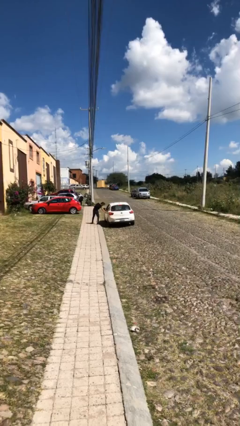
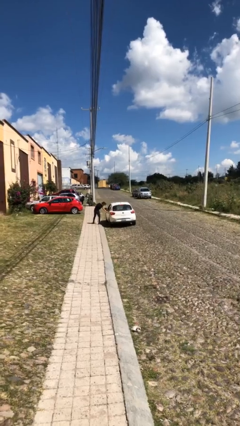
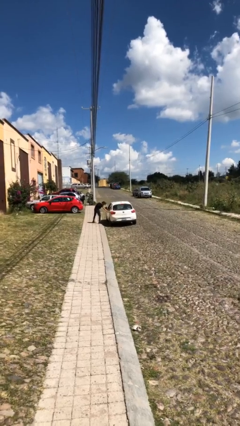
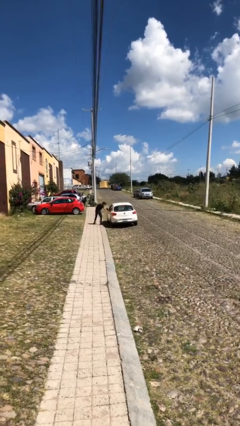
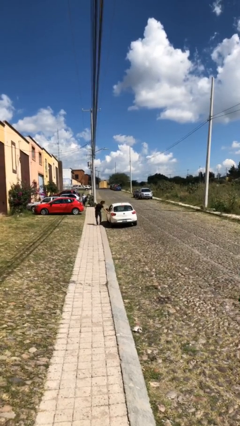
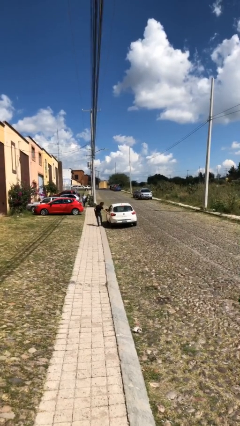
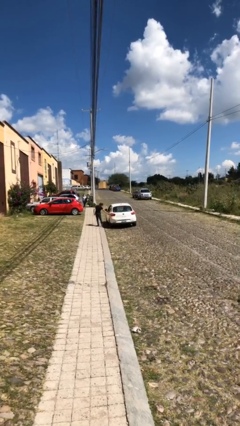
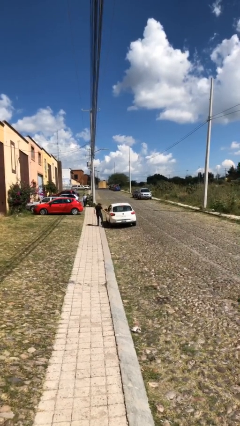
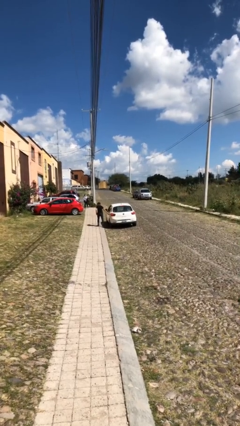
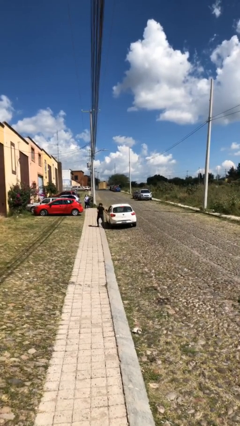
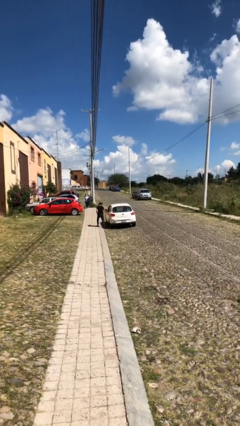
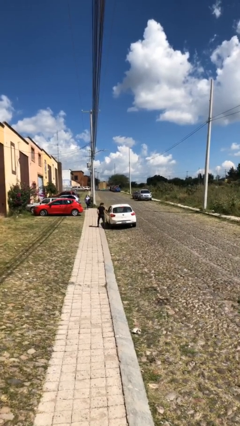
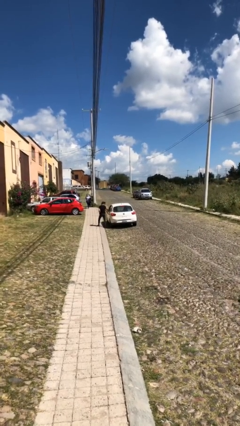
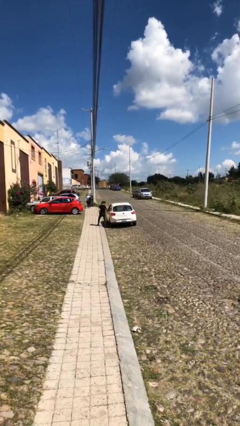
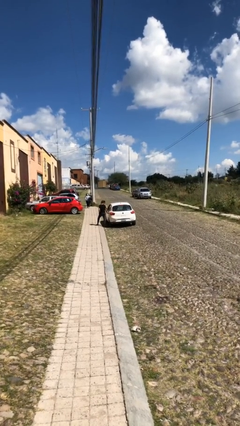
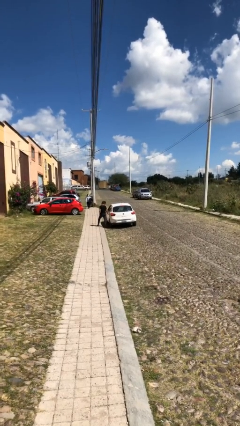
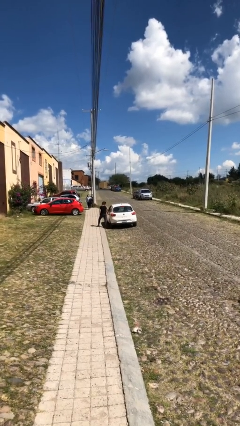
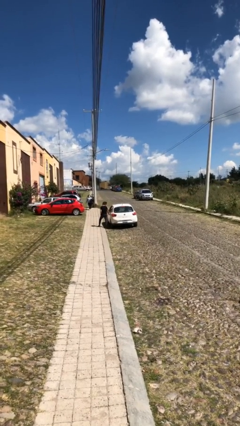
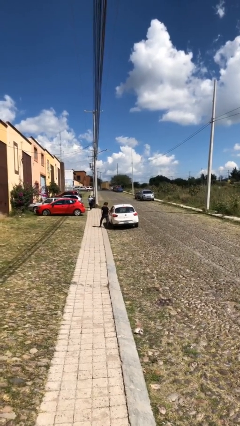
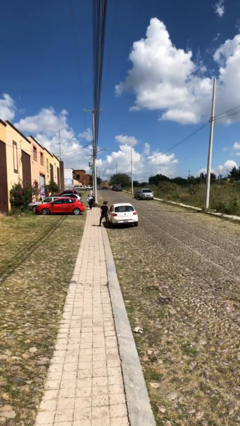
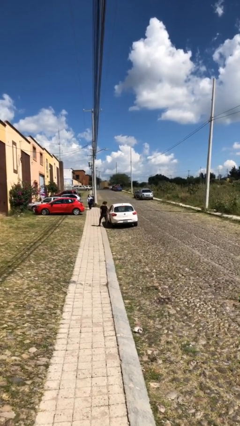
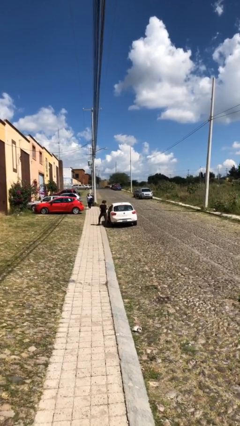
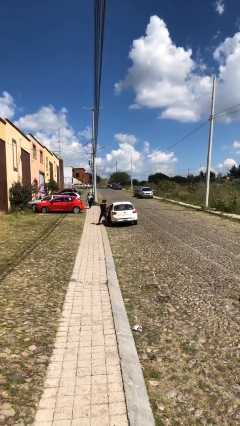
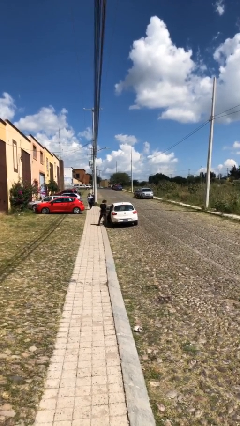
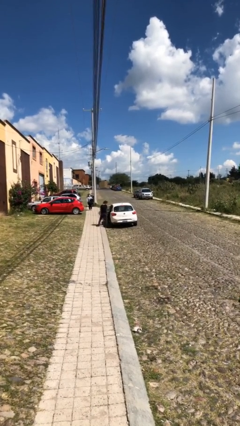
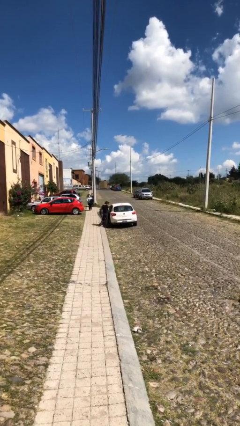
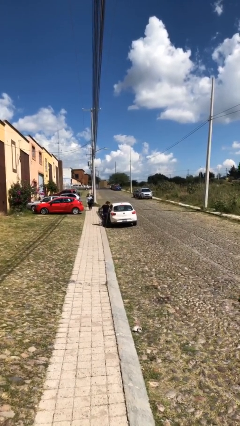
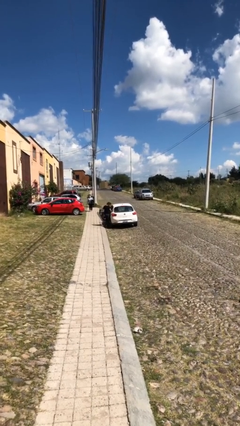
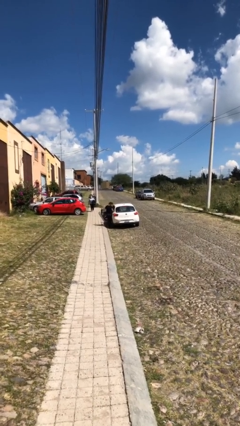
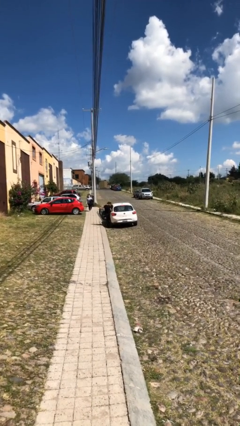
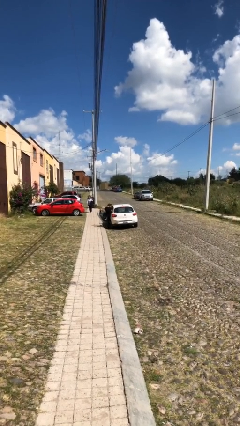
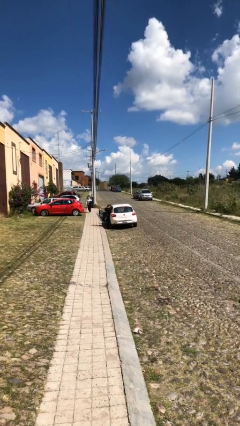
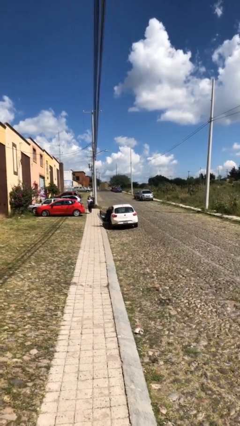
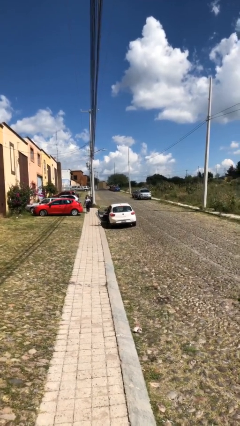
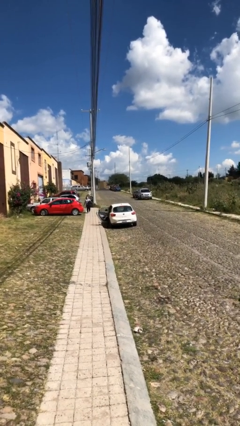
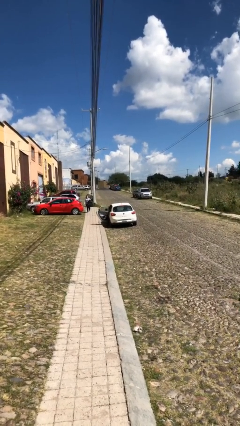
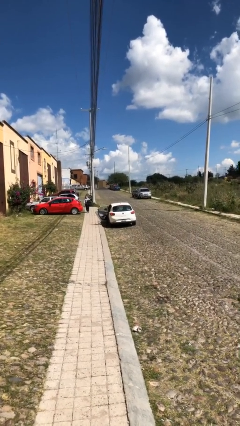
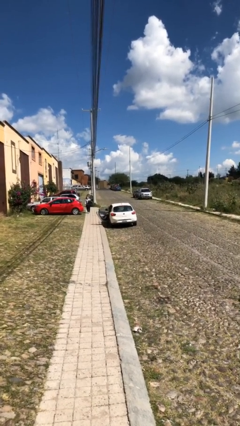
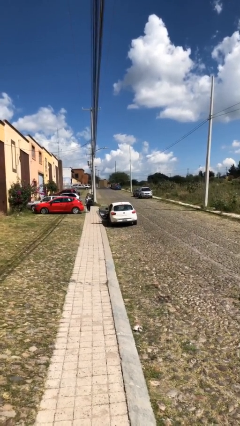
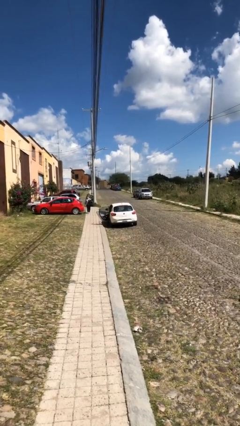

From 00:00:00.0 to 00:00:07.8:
car picks up person

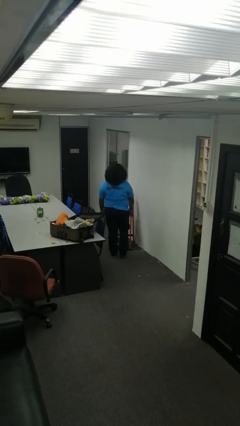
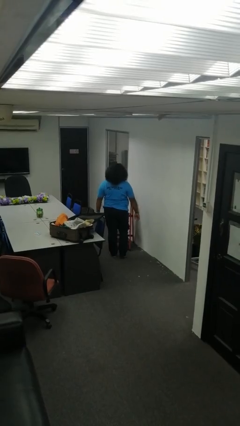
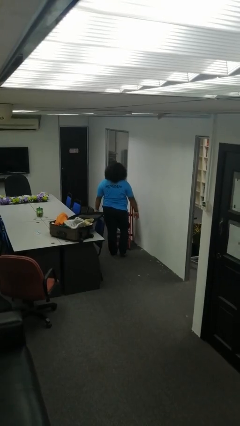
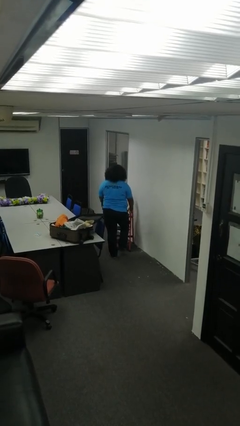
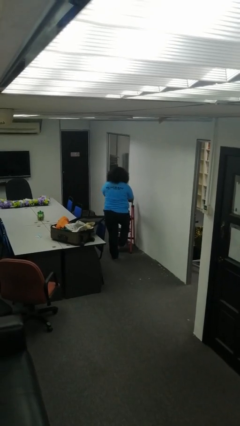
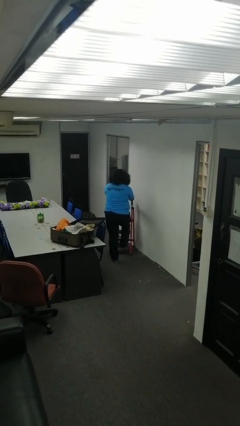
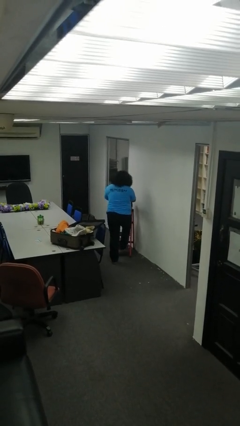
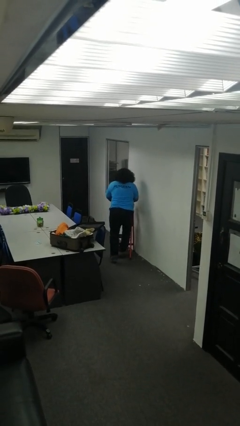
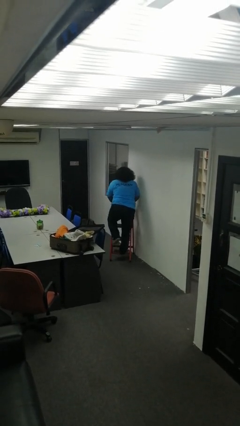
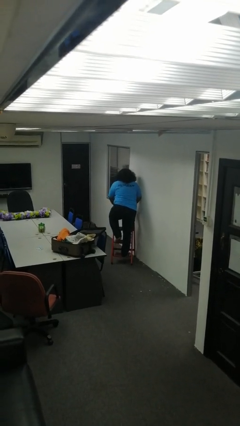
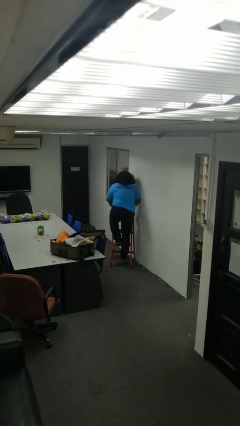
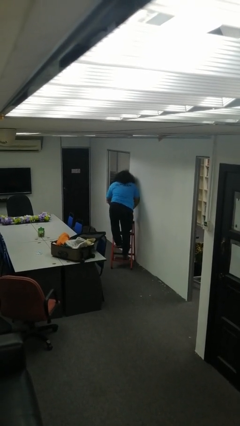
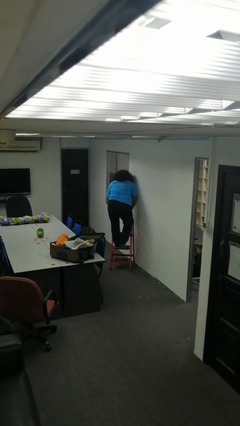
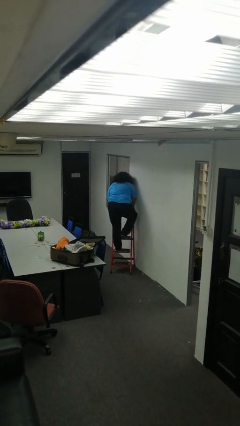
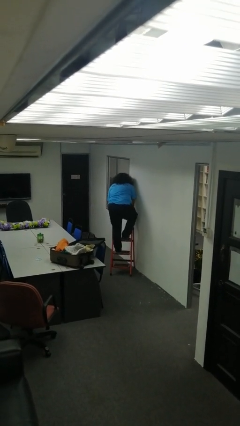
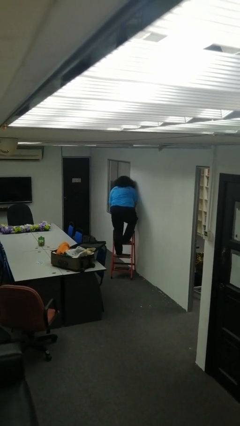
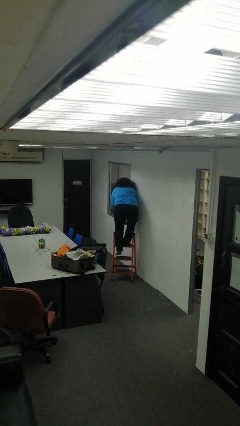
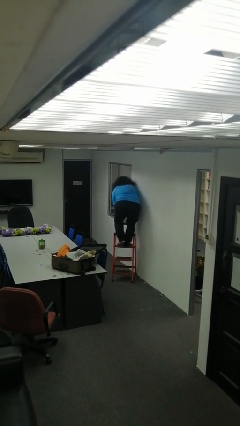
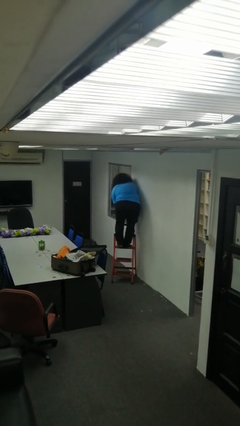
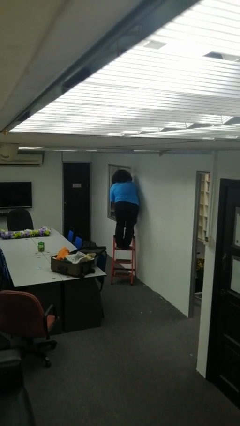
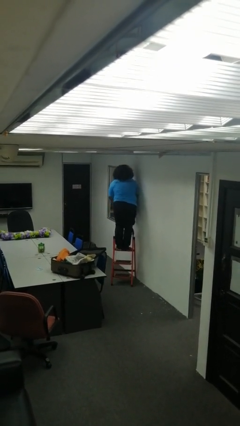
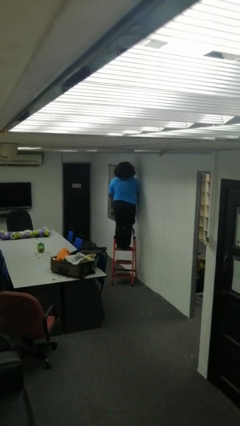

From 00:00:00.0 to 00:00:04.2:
person climbs up ladder

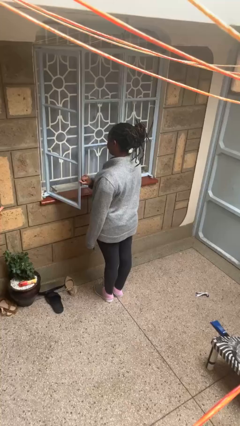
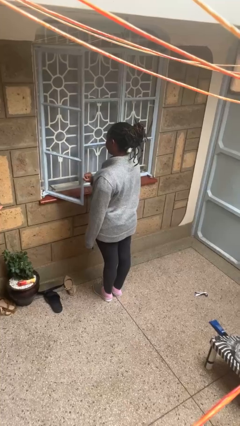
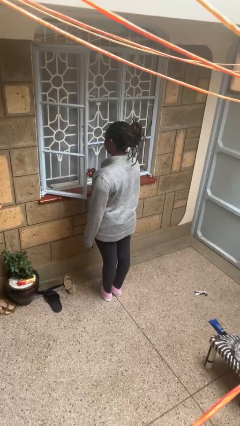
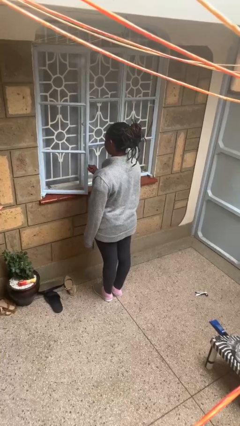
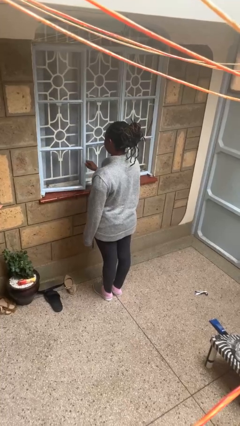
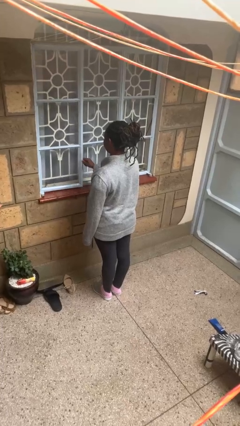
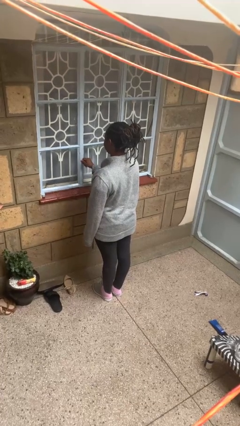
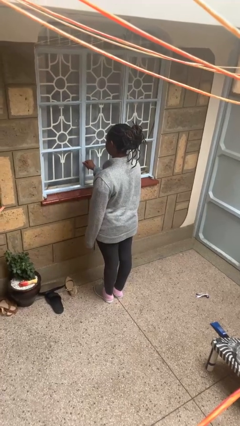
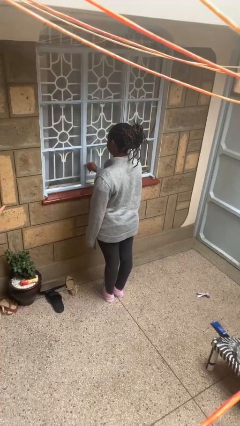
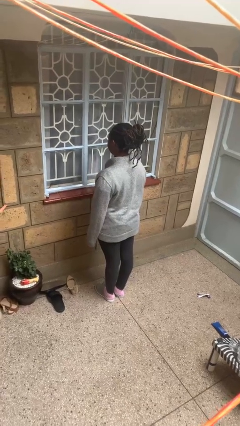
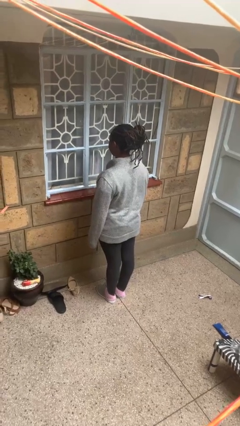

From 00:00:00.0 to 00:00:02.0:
person closes home window

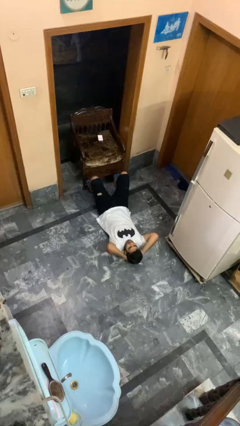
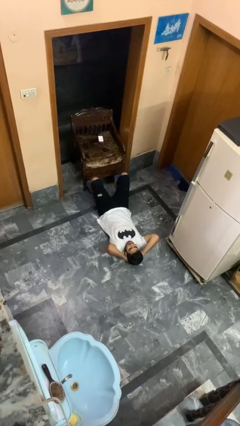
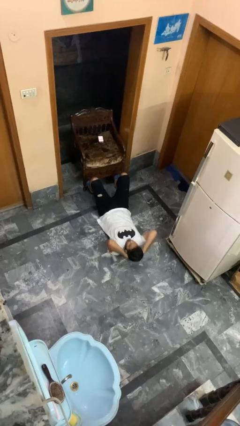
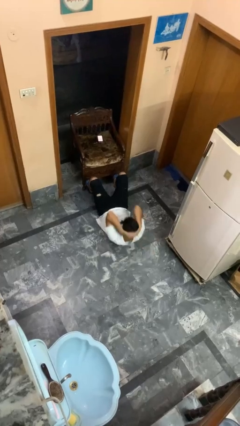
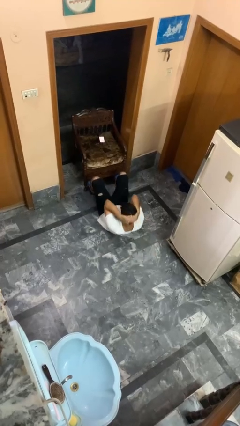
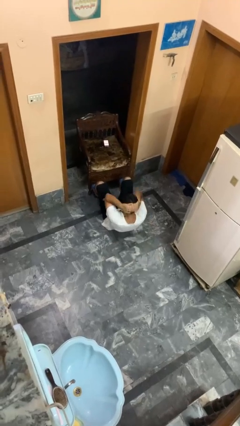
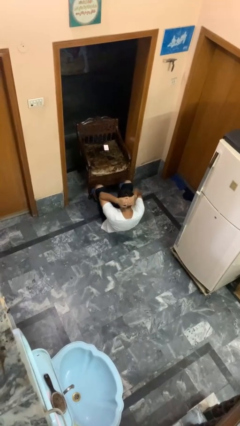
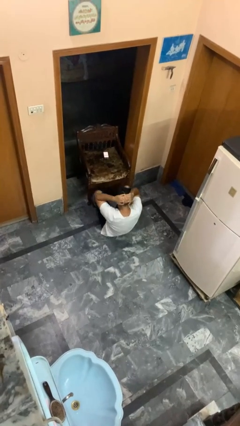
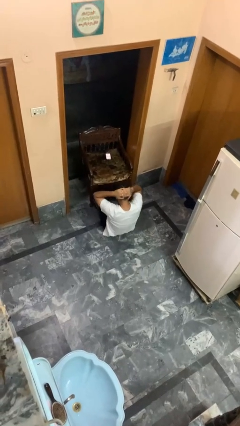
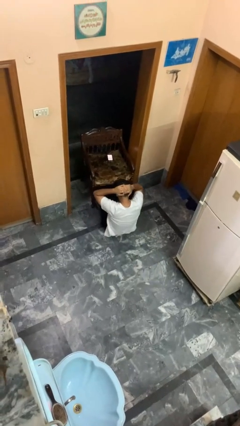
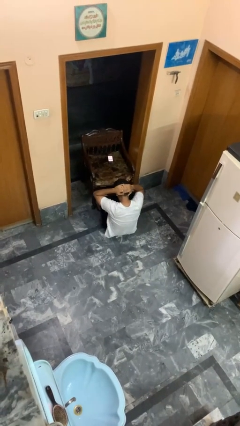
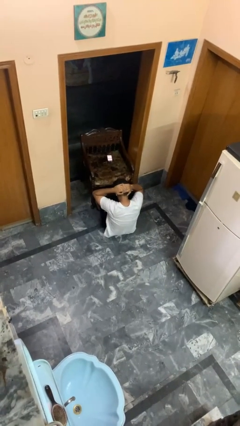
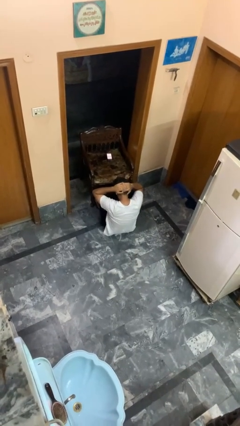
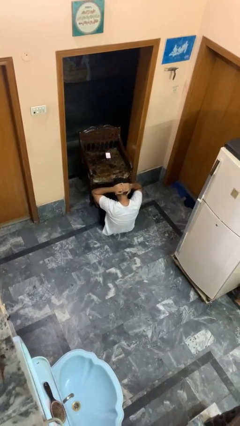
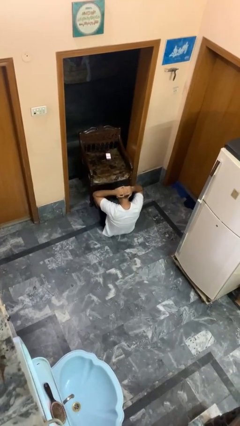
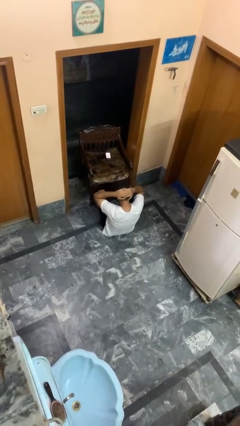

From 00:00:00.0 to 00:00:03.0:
person exercises with situp

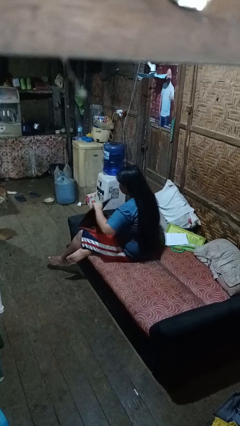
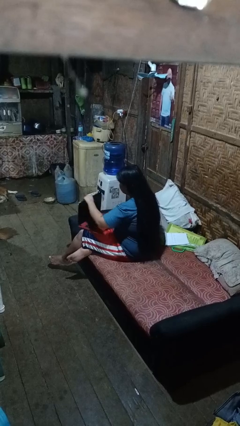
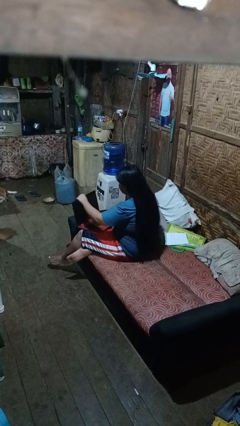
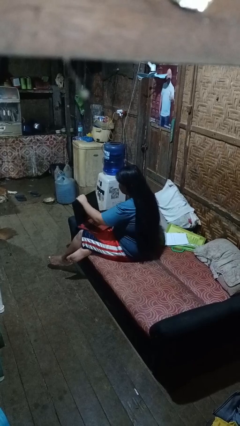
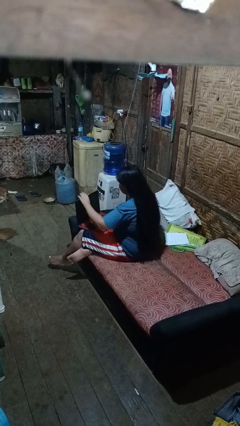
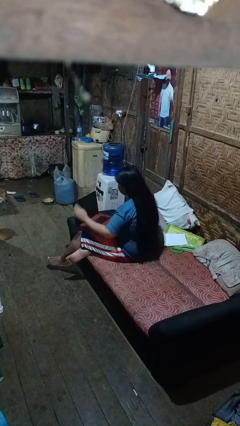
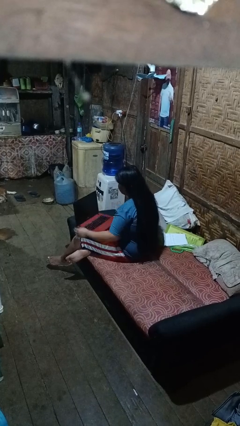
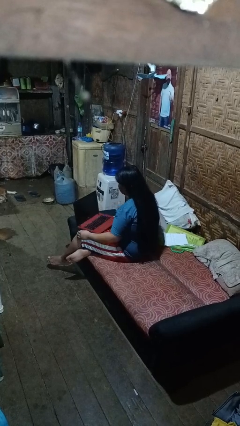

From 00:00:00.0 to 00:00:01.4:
person opens laptop
